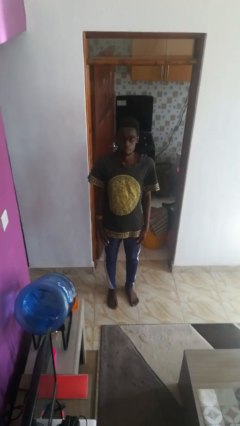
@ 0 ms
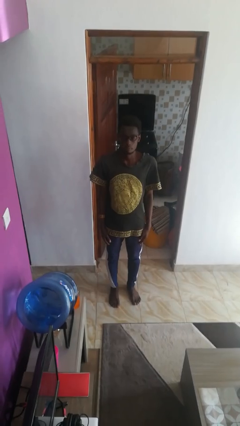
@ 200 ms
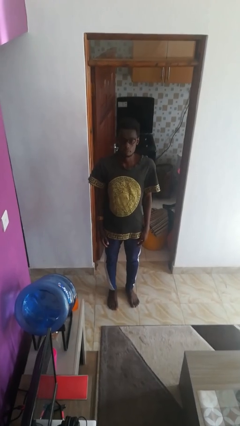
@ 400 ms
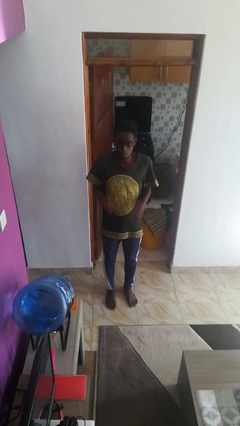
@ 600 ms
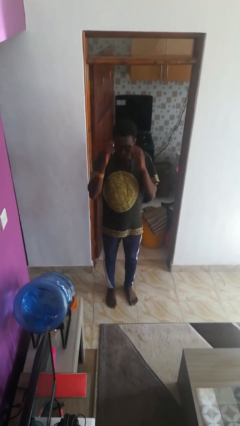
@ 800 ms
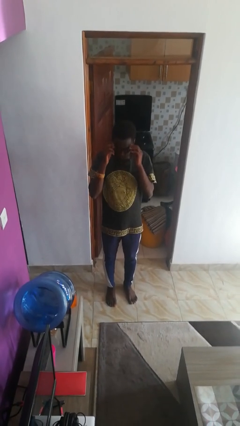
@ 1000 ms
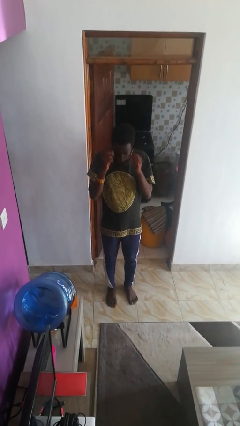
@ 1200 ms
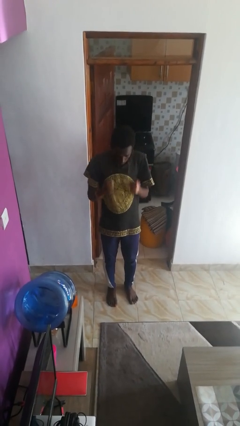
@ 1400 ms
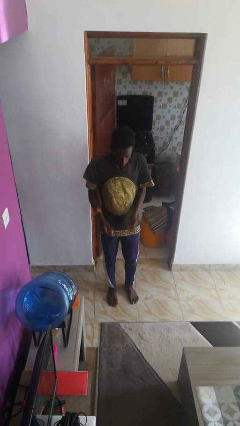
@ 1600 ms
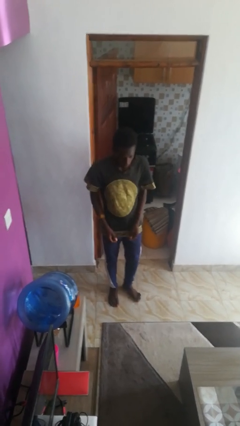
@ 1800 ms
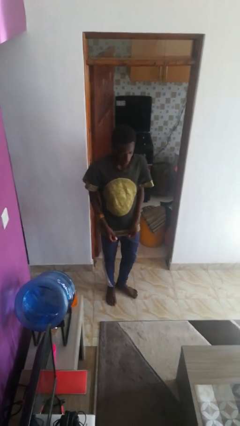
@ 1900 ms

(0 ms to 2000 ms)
person takes off glasses

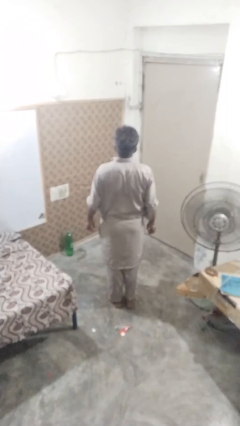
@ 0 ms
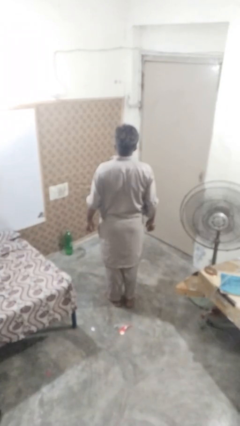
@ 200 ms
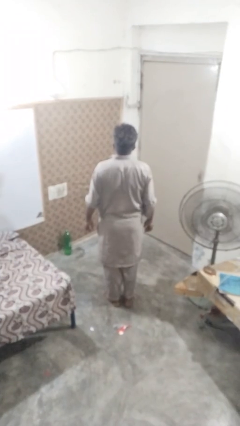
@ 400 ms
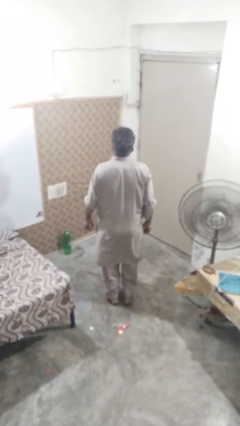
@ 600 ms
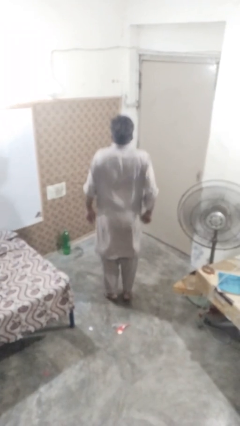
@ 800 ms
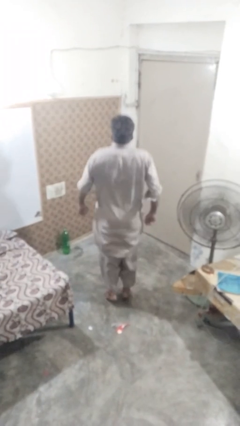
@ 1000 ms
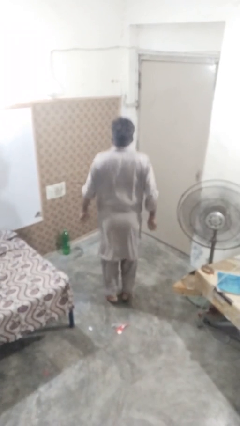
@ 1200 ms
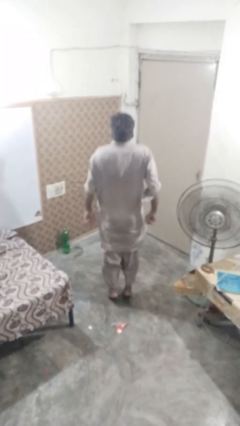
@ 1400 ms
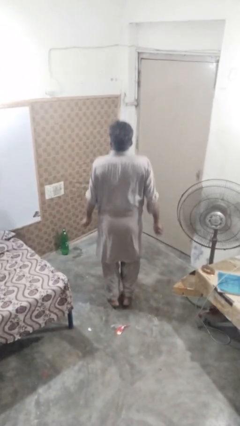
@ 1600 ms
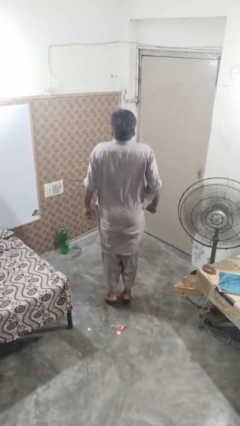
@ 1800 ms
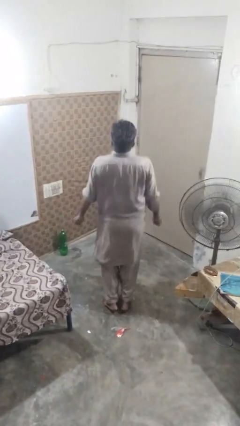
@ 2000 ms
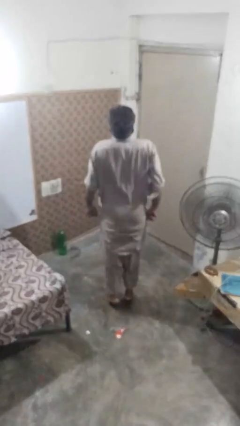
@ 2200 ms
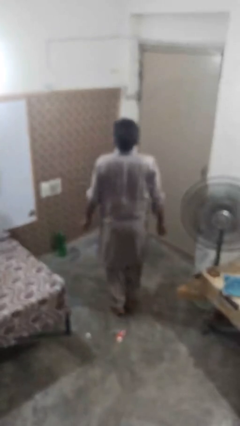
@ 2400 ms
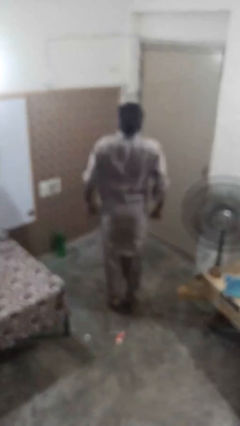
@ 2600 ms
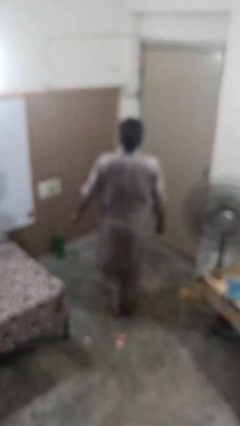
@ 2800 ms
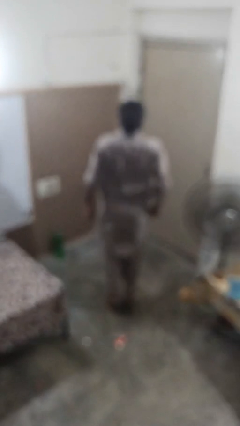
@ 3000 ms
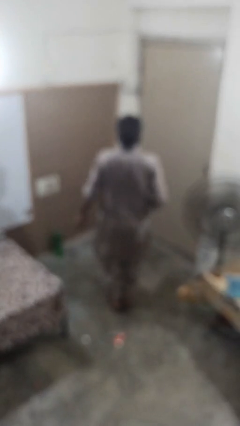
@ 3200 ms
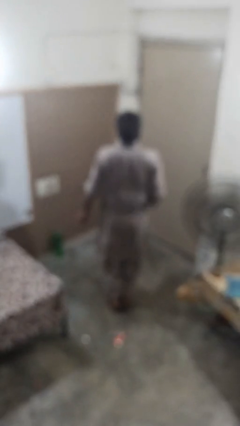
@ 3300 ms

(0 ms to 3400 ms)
person jumps

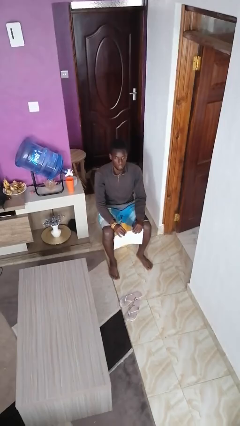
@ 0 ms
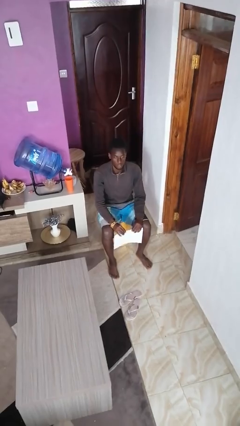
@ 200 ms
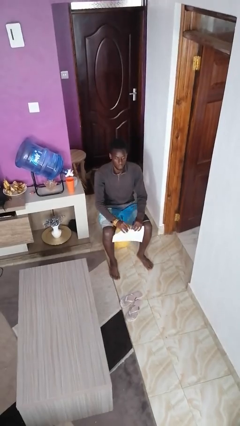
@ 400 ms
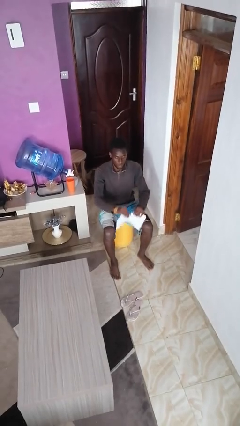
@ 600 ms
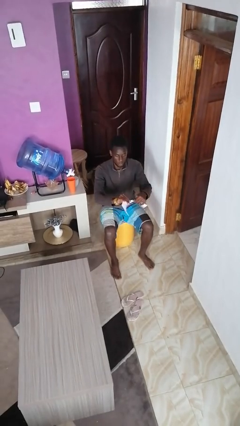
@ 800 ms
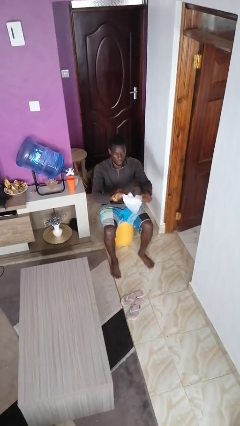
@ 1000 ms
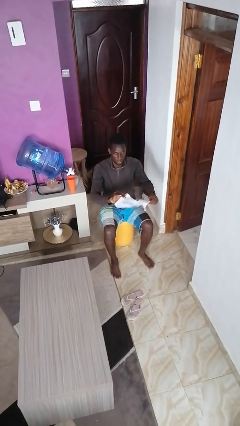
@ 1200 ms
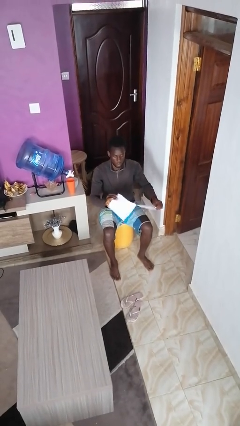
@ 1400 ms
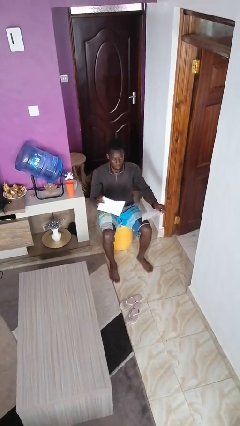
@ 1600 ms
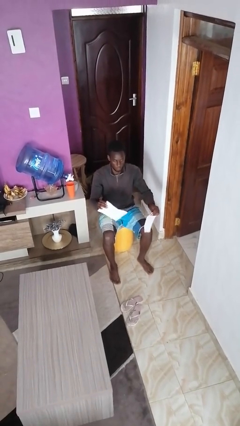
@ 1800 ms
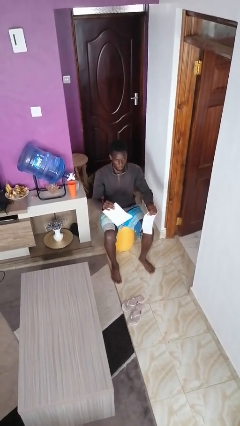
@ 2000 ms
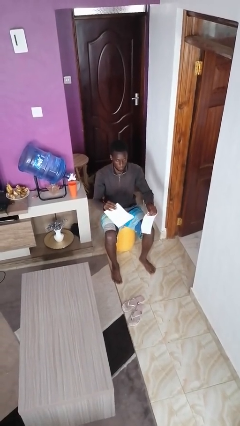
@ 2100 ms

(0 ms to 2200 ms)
person tears paper

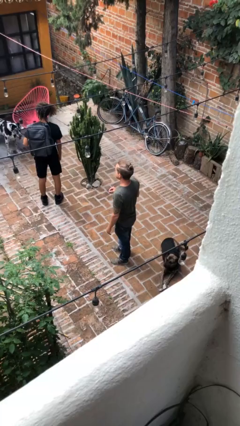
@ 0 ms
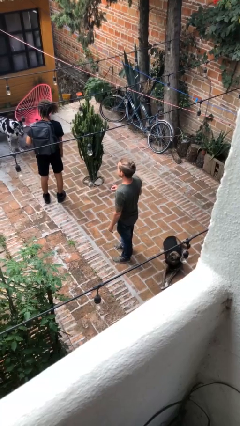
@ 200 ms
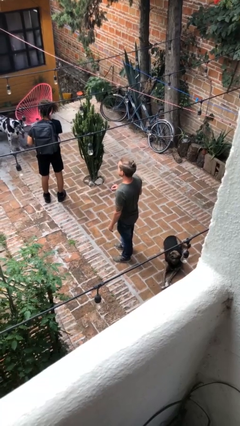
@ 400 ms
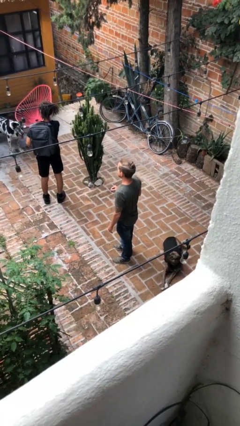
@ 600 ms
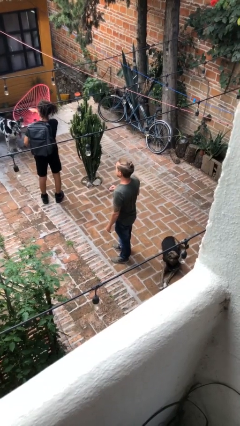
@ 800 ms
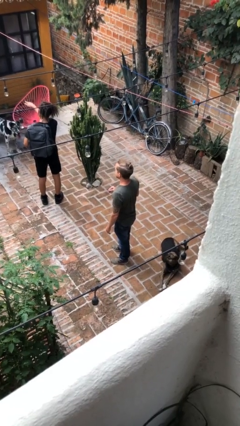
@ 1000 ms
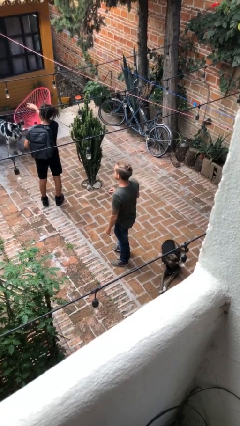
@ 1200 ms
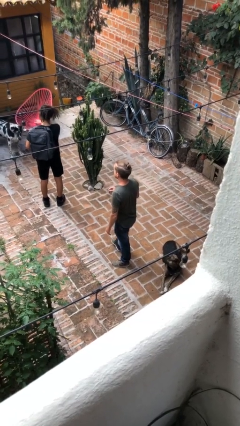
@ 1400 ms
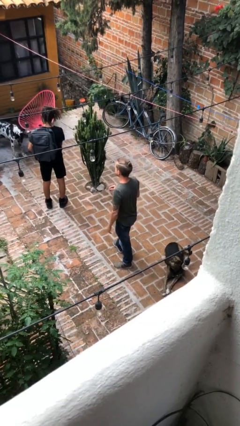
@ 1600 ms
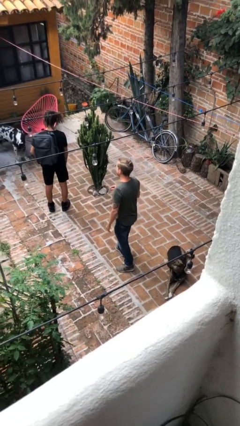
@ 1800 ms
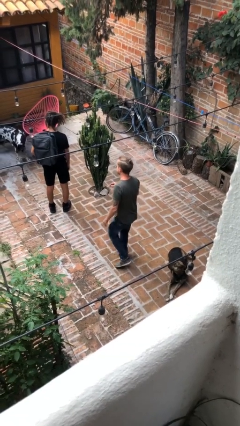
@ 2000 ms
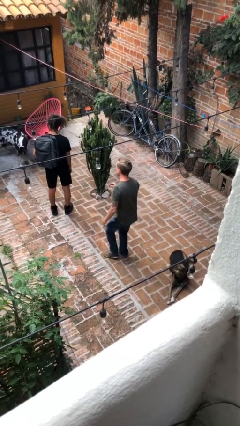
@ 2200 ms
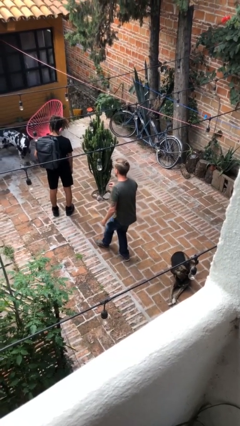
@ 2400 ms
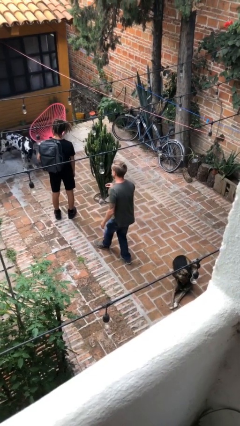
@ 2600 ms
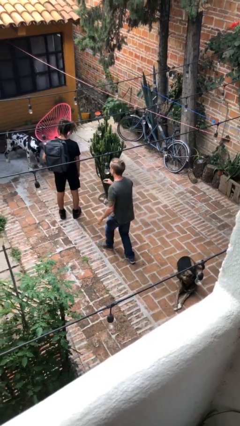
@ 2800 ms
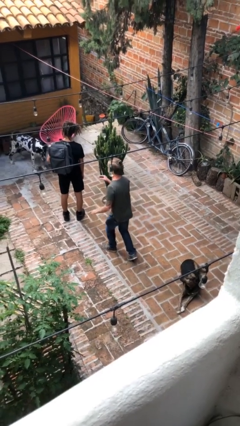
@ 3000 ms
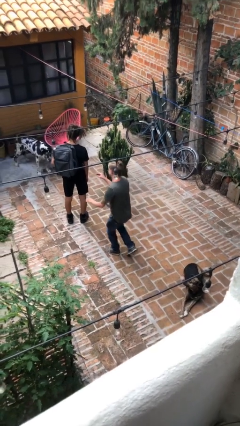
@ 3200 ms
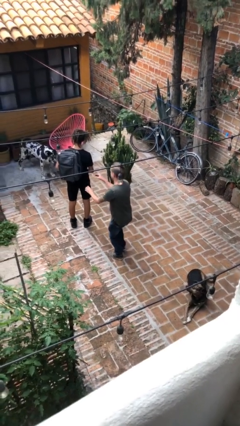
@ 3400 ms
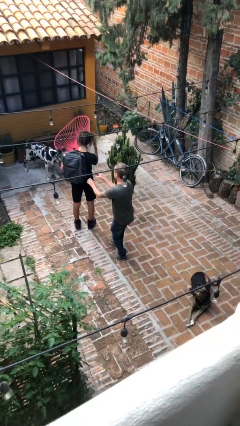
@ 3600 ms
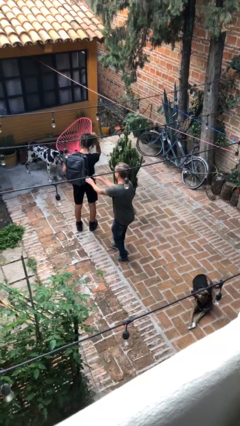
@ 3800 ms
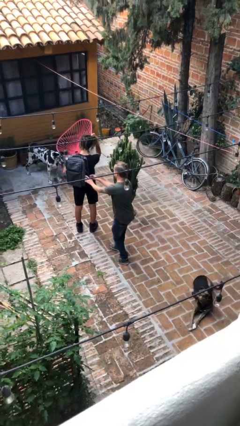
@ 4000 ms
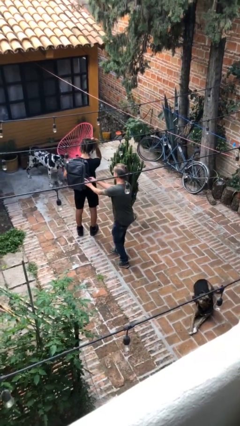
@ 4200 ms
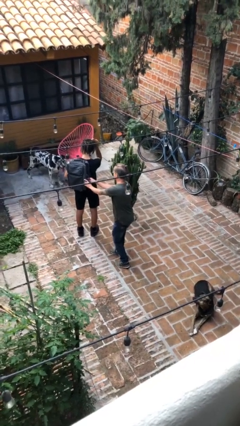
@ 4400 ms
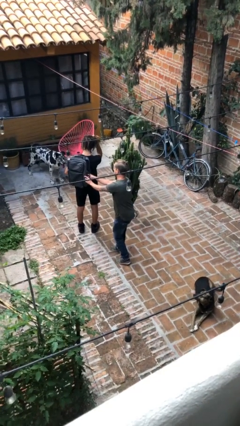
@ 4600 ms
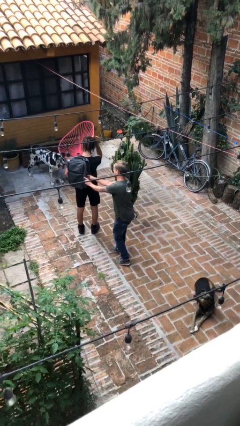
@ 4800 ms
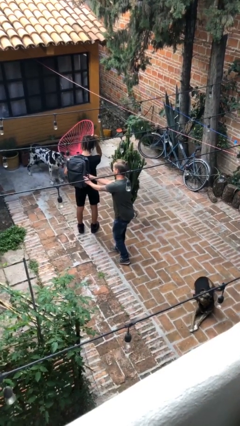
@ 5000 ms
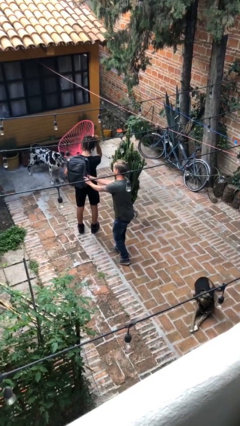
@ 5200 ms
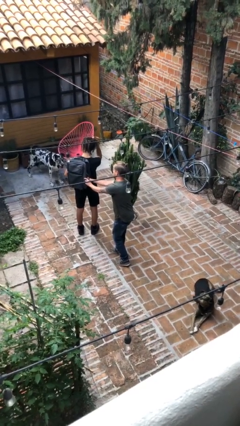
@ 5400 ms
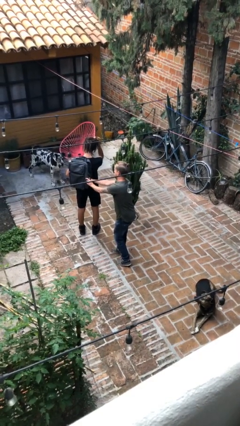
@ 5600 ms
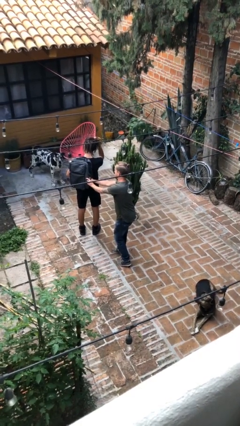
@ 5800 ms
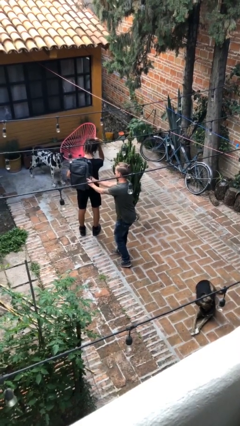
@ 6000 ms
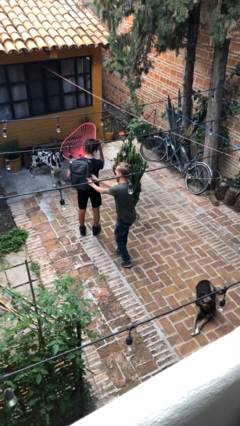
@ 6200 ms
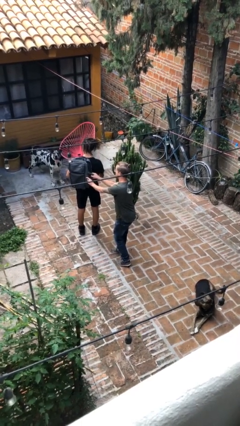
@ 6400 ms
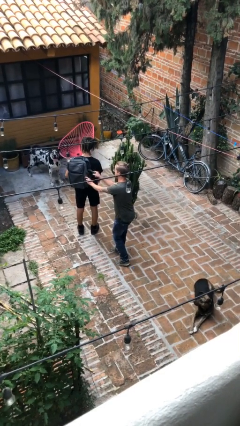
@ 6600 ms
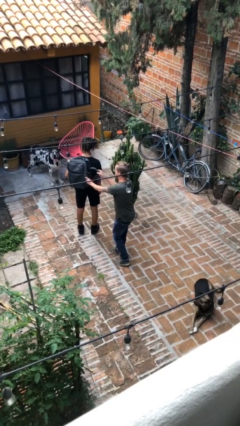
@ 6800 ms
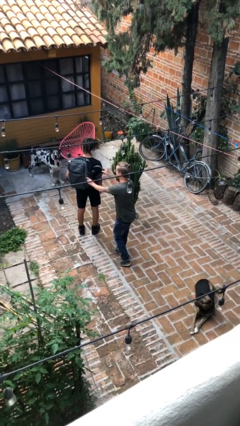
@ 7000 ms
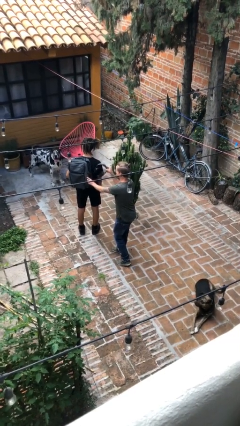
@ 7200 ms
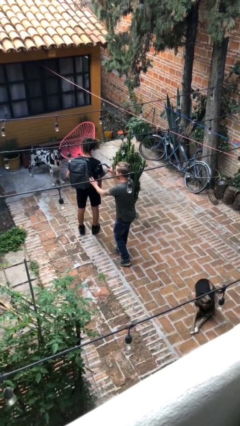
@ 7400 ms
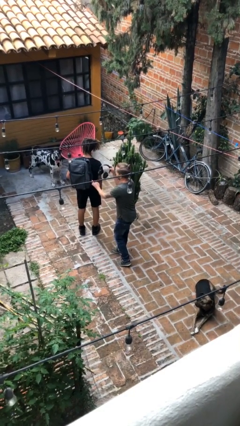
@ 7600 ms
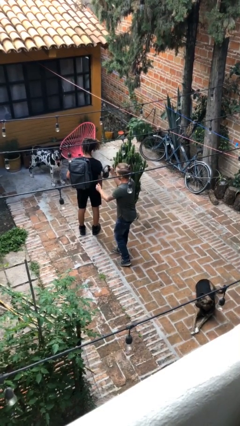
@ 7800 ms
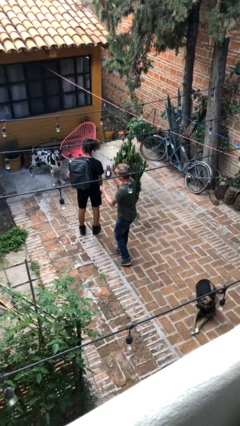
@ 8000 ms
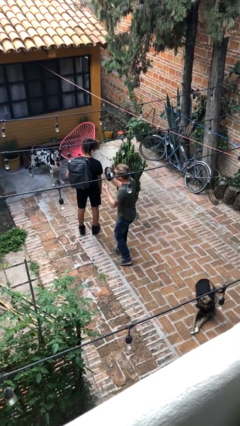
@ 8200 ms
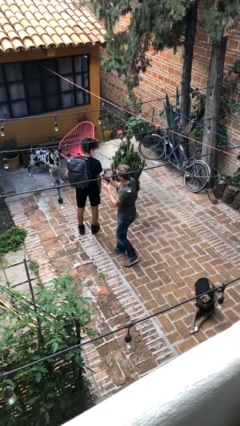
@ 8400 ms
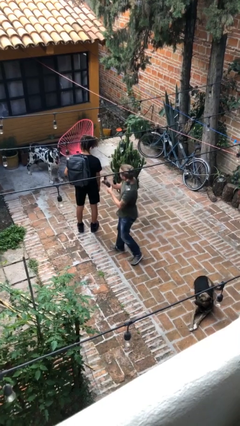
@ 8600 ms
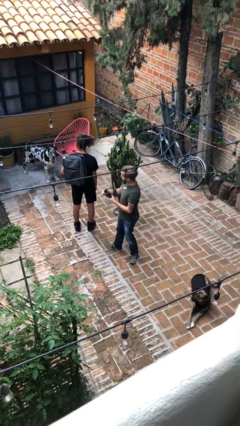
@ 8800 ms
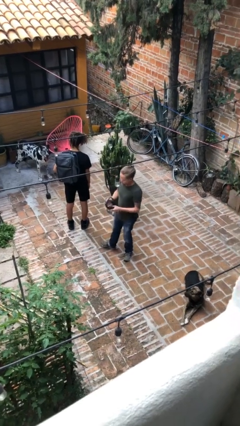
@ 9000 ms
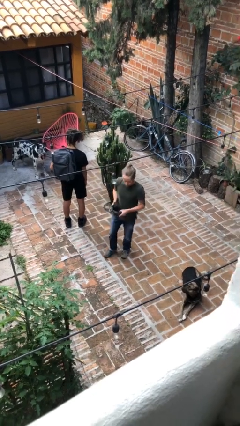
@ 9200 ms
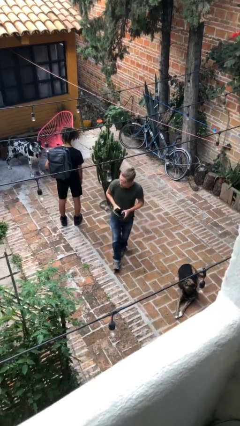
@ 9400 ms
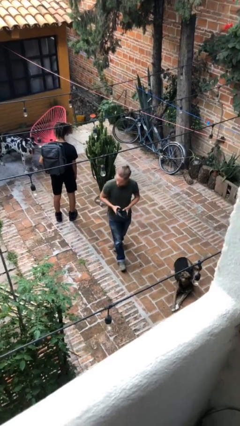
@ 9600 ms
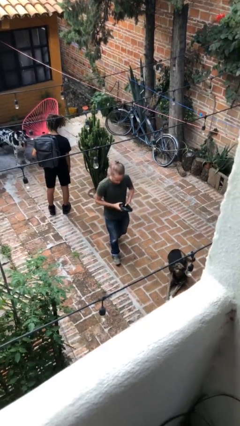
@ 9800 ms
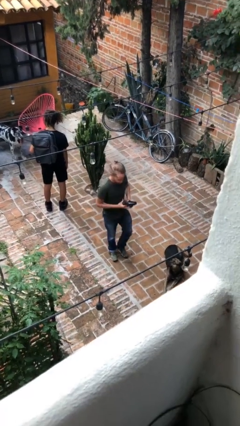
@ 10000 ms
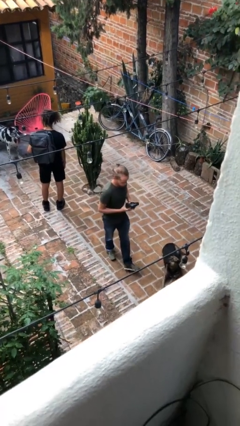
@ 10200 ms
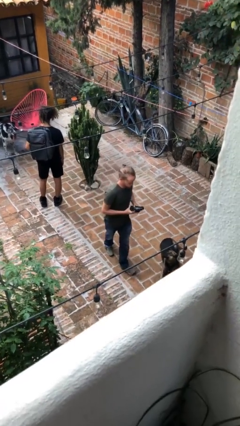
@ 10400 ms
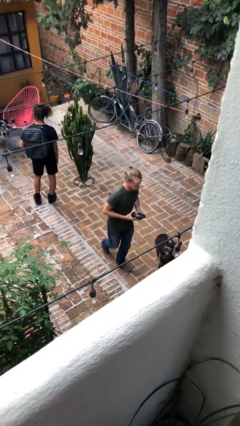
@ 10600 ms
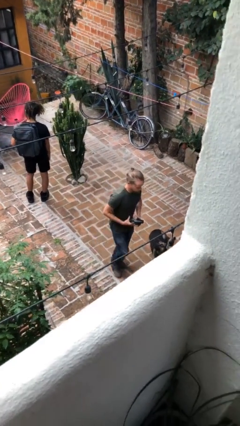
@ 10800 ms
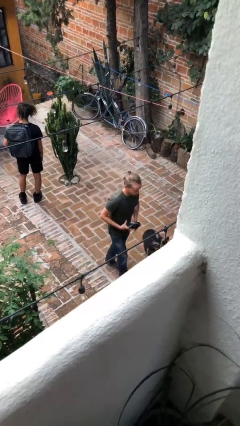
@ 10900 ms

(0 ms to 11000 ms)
person steals object from person
